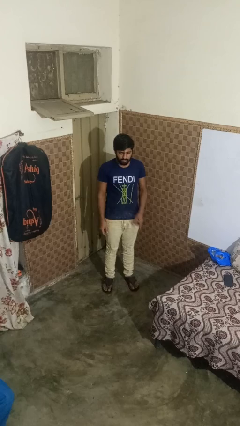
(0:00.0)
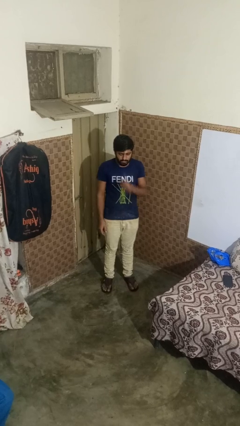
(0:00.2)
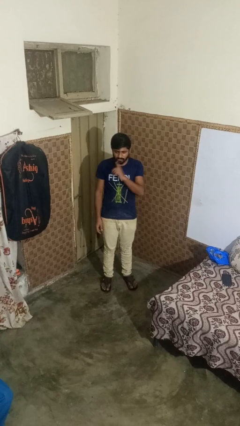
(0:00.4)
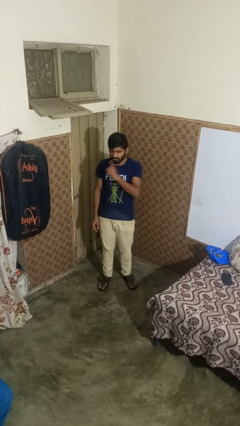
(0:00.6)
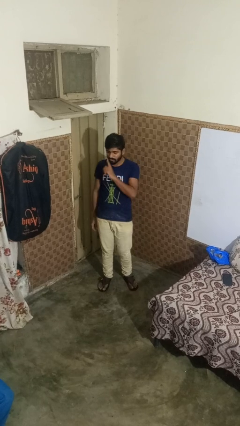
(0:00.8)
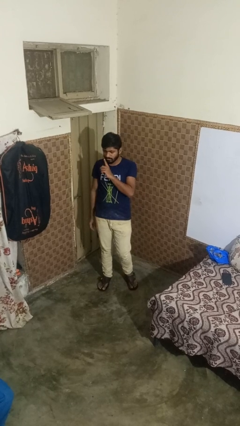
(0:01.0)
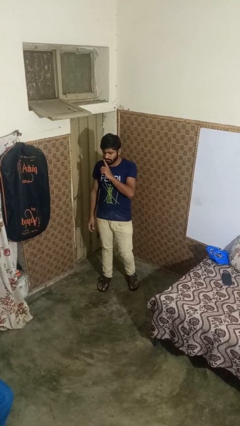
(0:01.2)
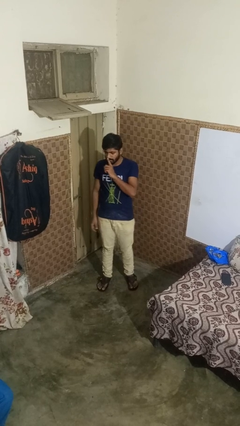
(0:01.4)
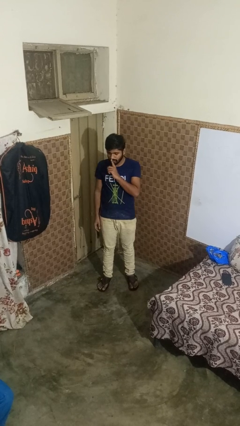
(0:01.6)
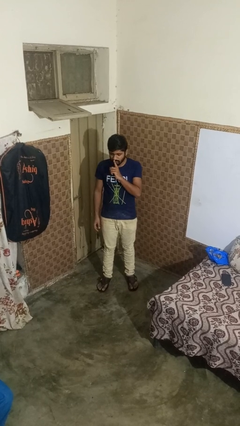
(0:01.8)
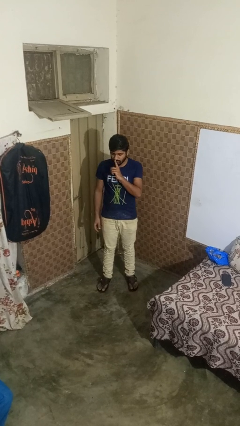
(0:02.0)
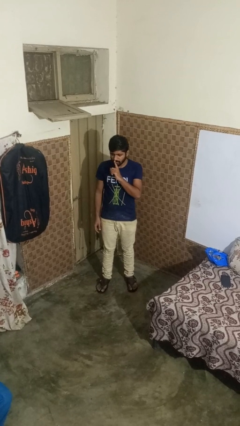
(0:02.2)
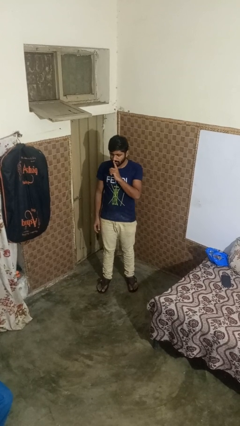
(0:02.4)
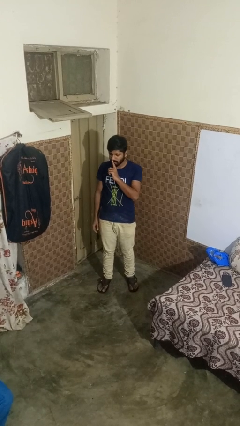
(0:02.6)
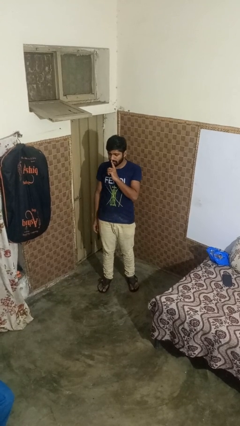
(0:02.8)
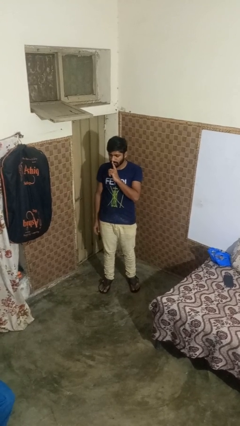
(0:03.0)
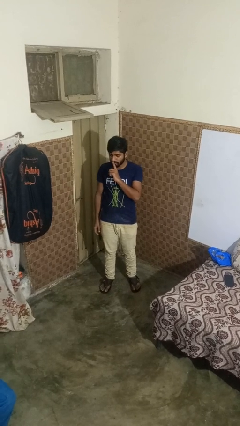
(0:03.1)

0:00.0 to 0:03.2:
person gestures be quiet

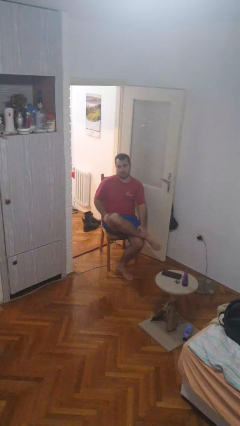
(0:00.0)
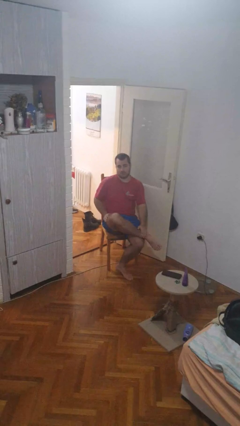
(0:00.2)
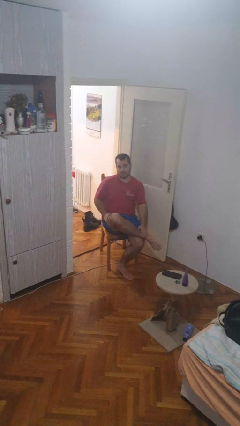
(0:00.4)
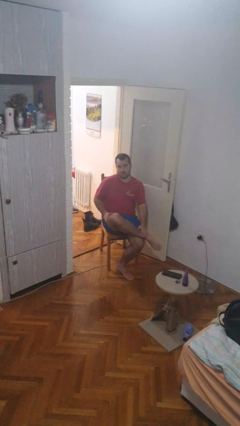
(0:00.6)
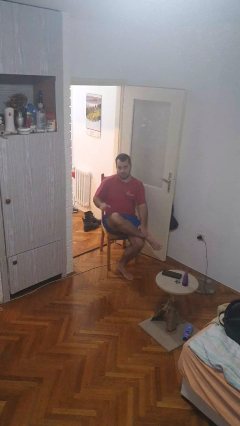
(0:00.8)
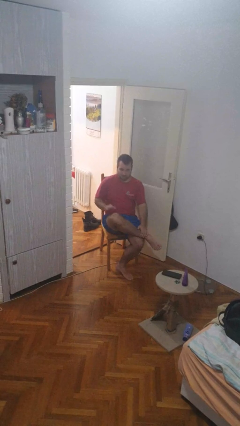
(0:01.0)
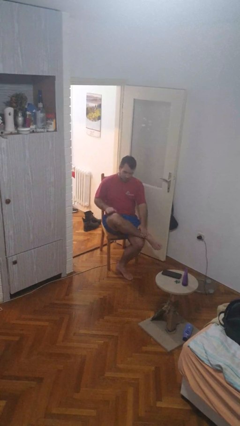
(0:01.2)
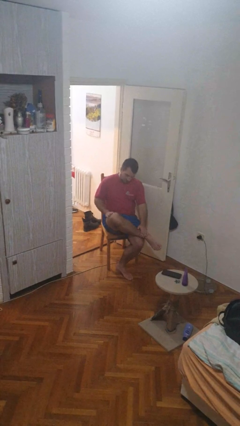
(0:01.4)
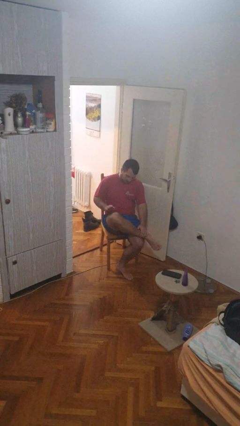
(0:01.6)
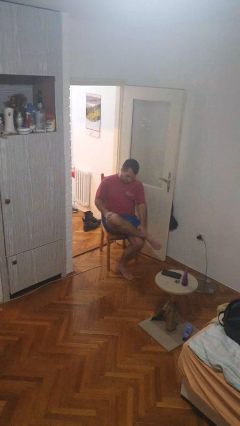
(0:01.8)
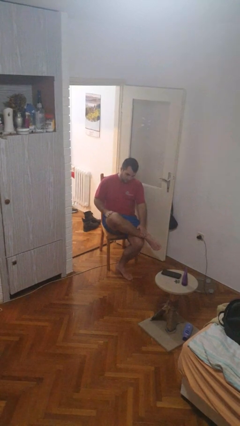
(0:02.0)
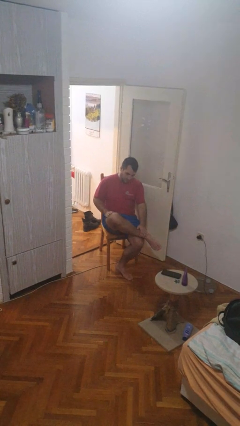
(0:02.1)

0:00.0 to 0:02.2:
person slaps hands on thighs

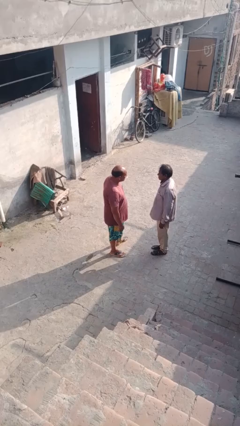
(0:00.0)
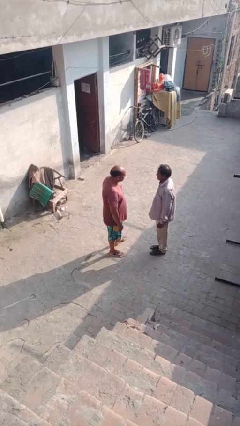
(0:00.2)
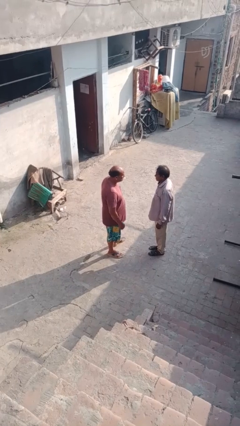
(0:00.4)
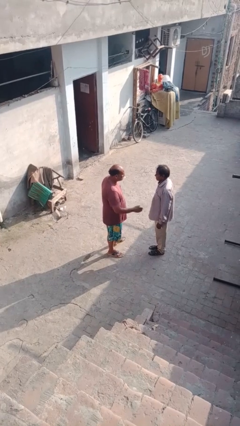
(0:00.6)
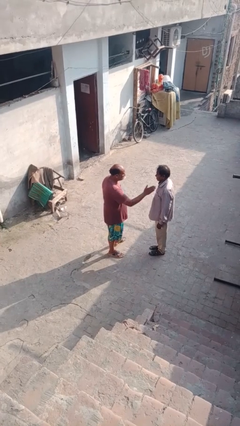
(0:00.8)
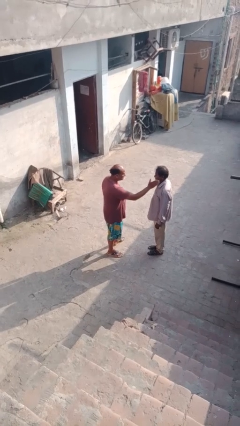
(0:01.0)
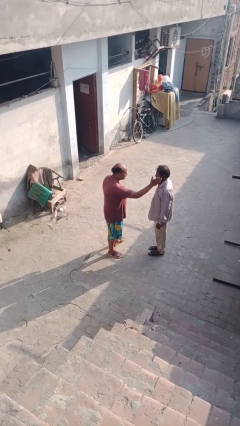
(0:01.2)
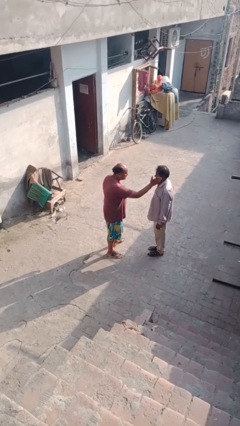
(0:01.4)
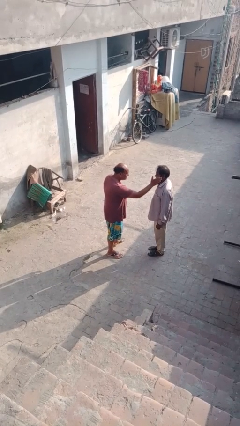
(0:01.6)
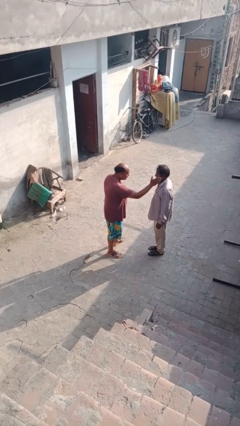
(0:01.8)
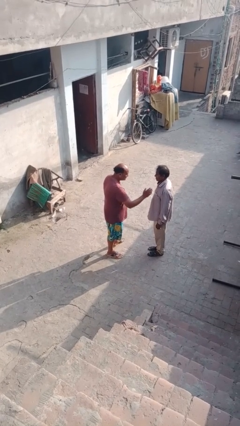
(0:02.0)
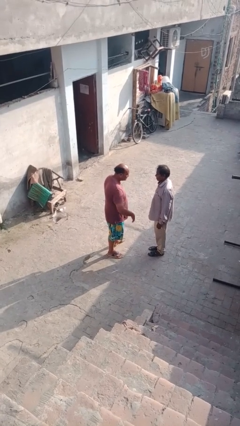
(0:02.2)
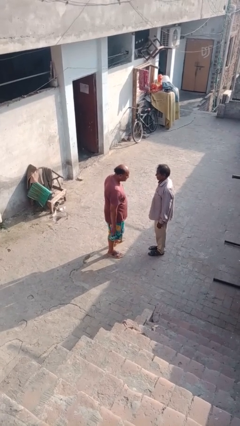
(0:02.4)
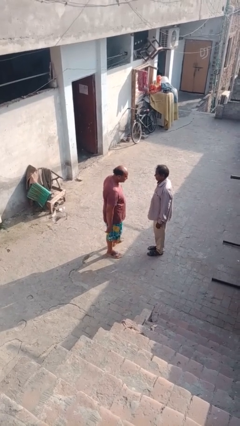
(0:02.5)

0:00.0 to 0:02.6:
person touches face of person

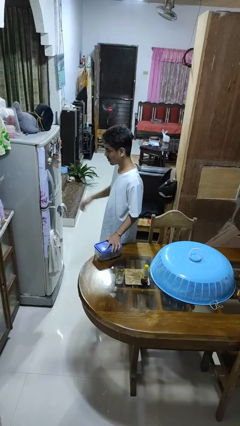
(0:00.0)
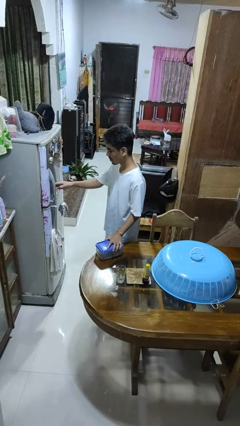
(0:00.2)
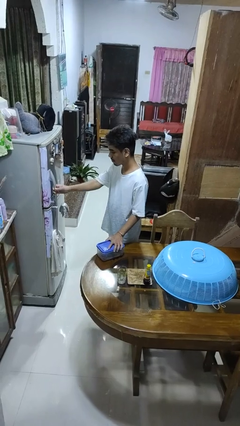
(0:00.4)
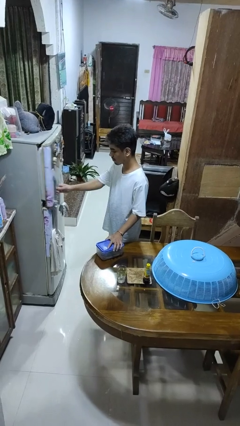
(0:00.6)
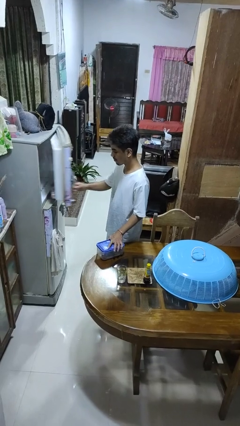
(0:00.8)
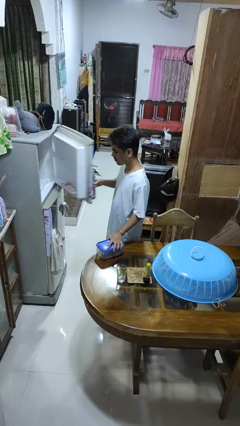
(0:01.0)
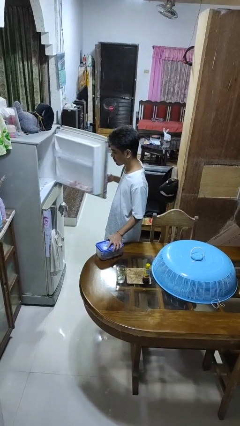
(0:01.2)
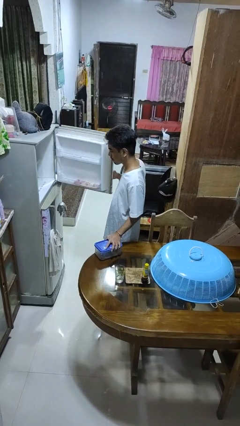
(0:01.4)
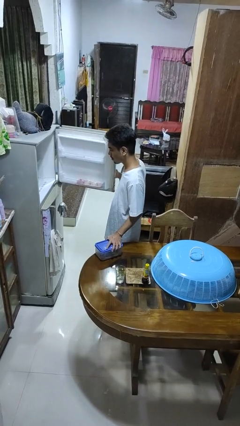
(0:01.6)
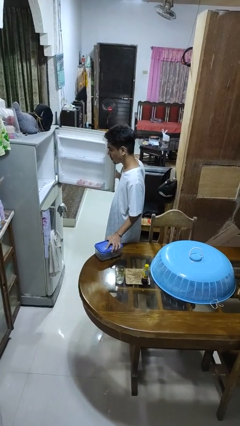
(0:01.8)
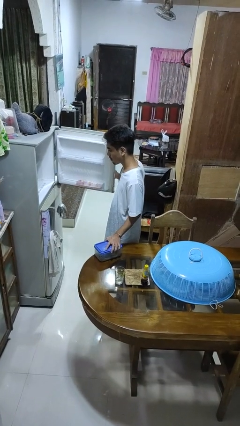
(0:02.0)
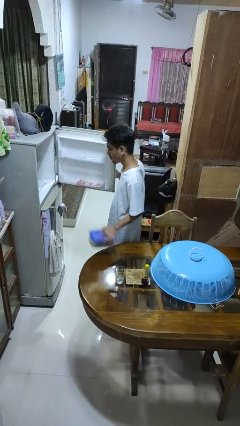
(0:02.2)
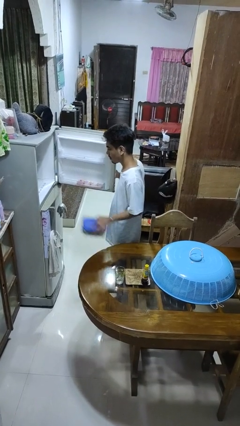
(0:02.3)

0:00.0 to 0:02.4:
person opens refrigerator

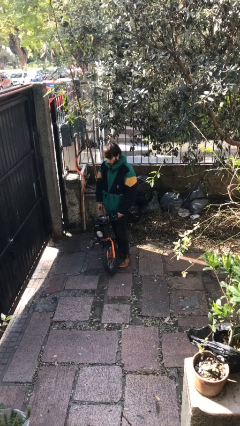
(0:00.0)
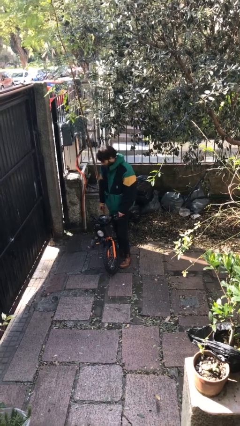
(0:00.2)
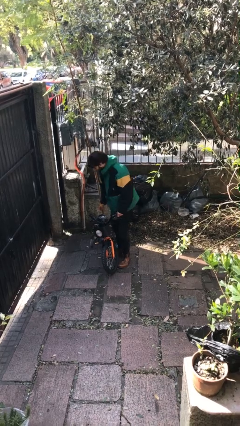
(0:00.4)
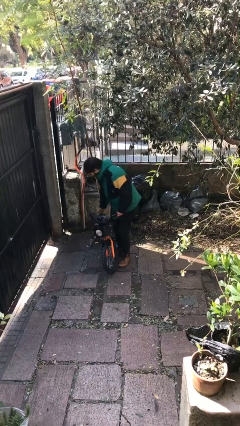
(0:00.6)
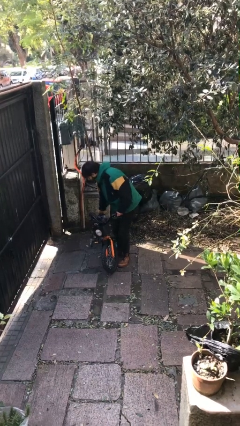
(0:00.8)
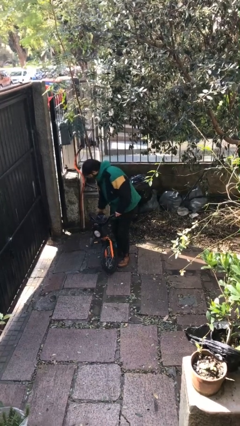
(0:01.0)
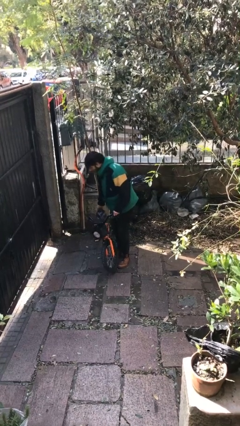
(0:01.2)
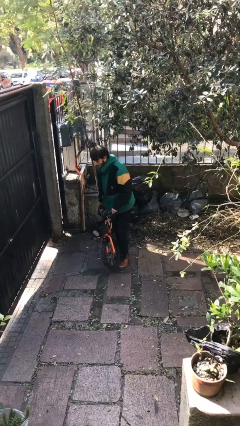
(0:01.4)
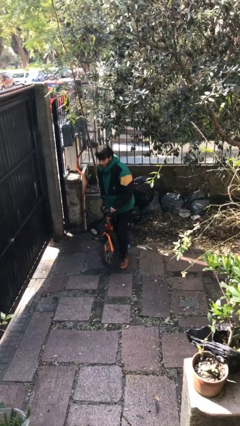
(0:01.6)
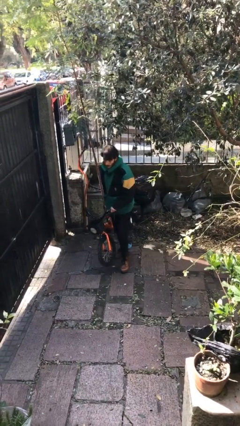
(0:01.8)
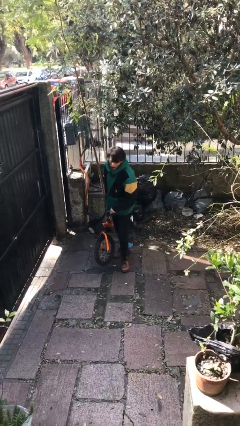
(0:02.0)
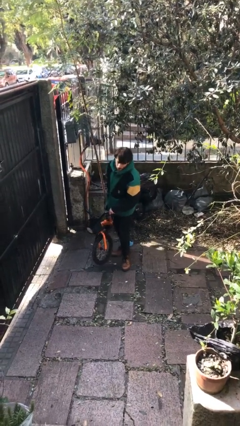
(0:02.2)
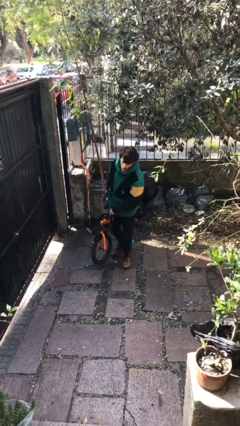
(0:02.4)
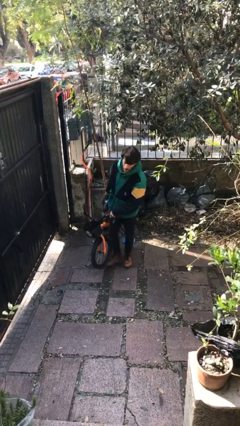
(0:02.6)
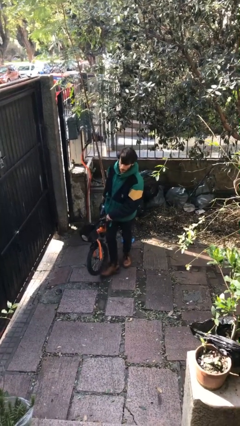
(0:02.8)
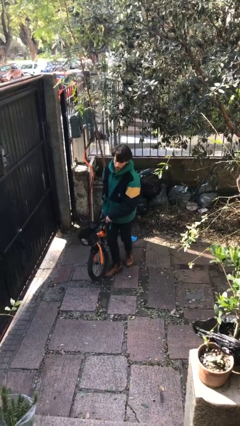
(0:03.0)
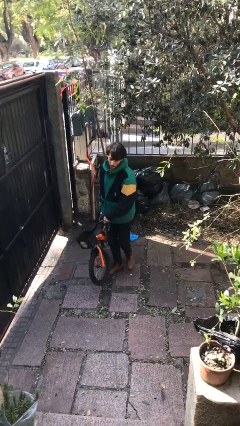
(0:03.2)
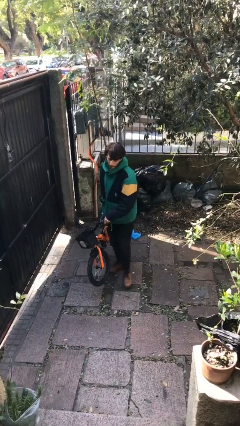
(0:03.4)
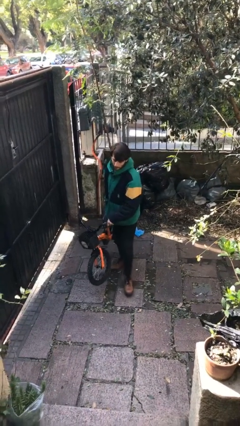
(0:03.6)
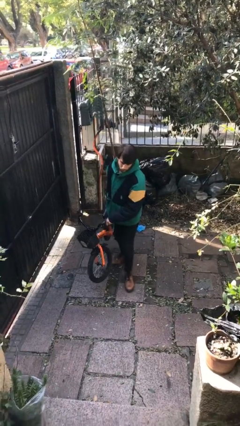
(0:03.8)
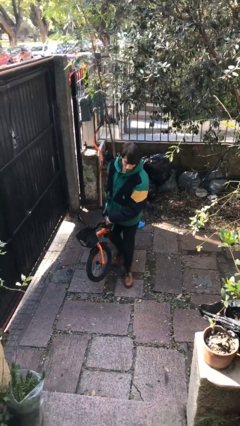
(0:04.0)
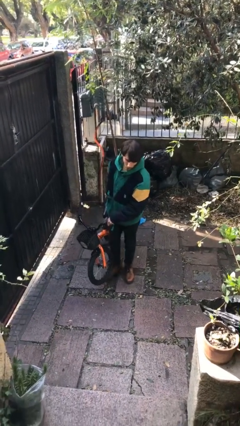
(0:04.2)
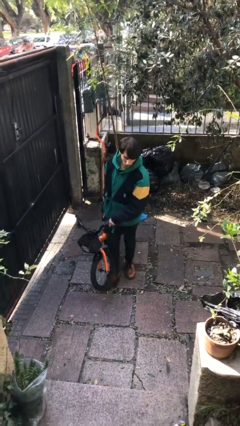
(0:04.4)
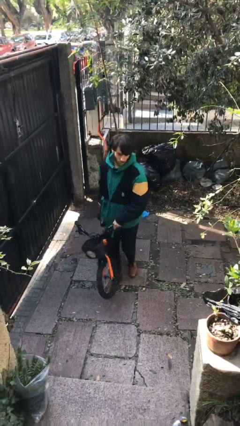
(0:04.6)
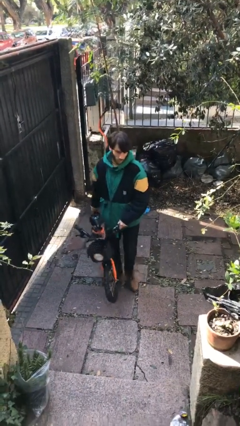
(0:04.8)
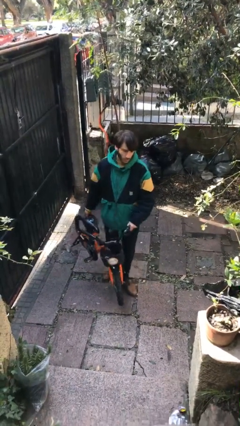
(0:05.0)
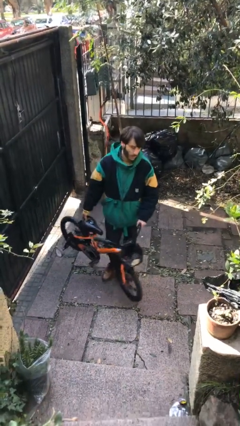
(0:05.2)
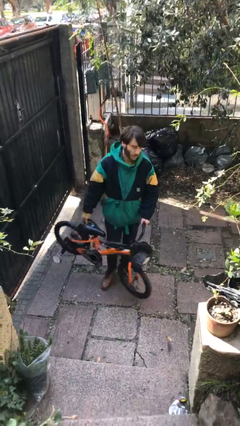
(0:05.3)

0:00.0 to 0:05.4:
person carries bicycle

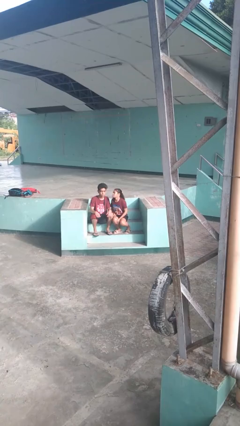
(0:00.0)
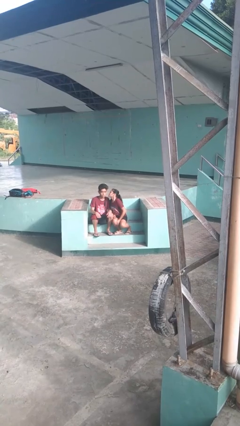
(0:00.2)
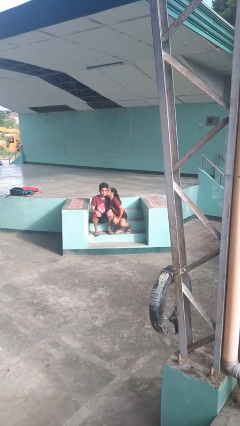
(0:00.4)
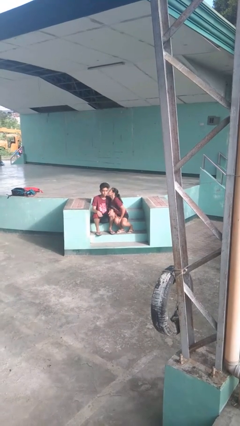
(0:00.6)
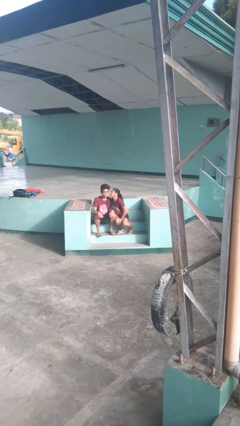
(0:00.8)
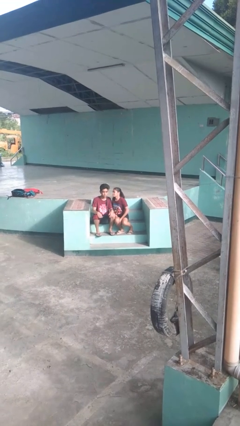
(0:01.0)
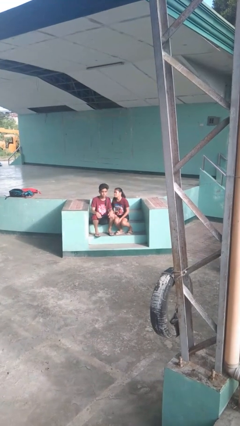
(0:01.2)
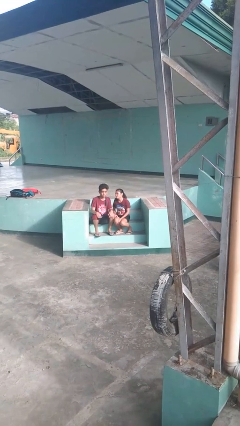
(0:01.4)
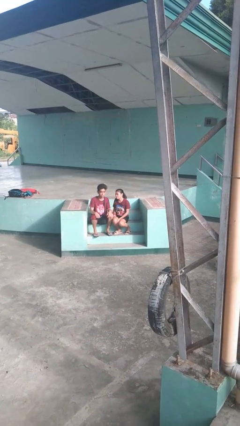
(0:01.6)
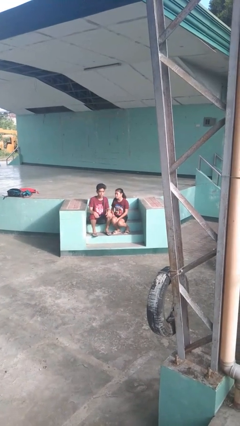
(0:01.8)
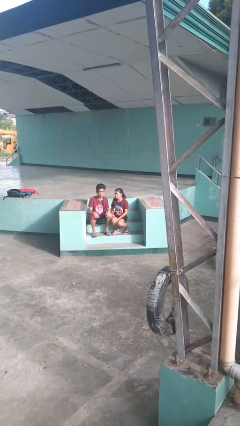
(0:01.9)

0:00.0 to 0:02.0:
person kisses cheek of person

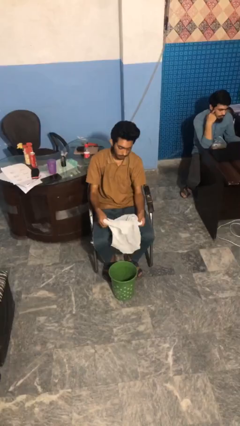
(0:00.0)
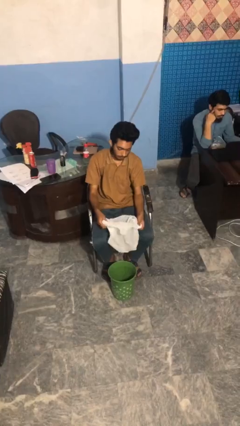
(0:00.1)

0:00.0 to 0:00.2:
person inserts trashbag into trashcan
